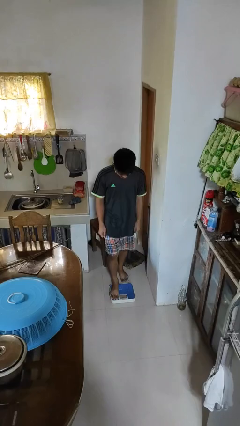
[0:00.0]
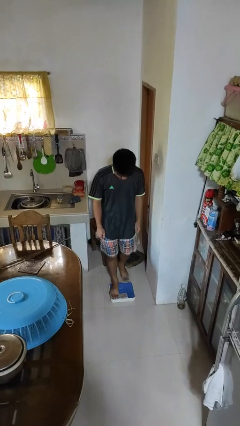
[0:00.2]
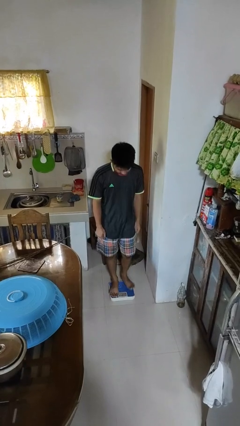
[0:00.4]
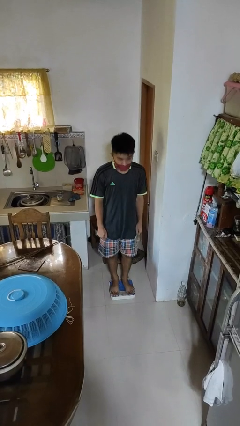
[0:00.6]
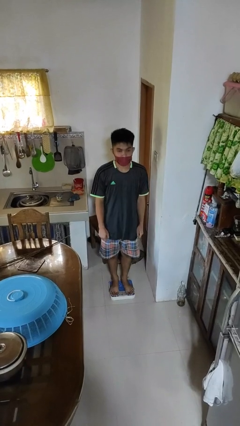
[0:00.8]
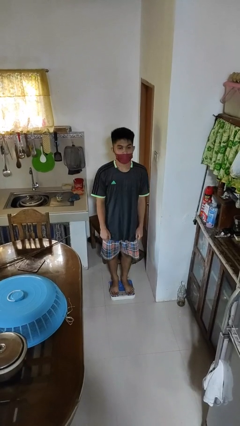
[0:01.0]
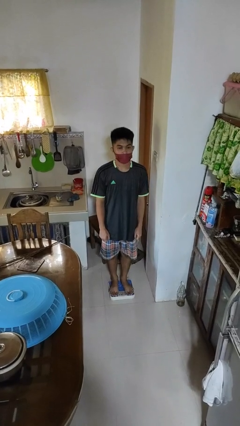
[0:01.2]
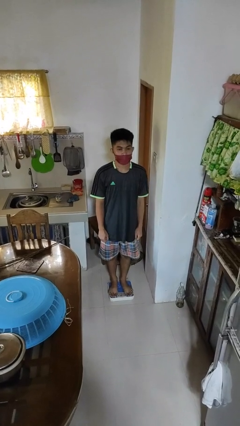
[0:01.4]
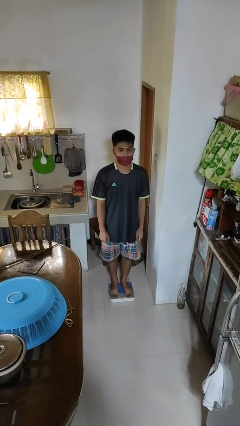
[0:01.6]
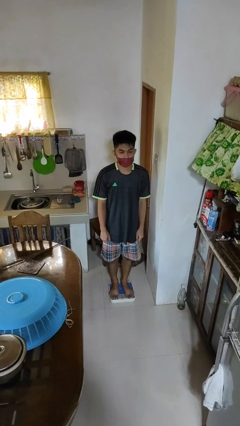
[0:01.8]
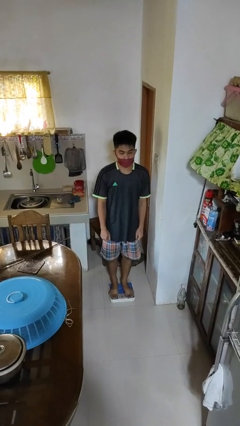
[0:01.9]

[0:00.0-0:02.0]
person uses bodyweight scale

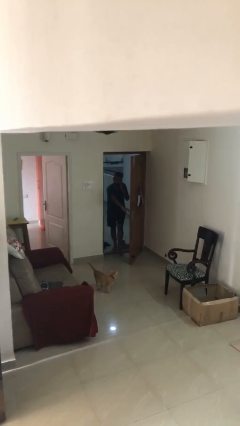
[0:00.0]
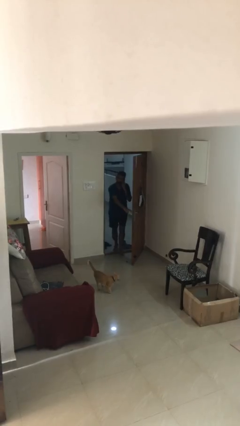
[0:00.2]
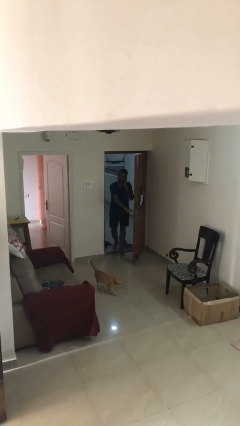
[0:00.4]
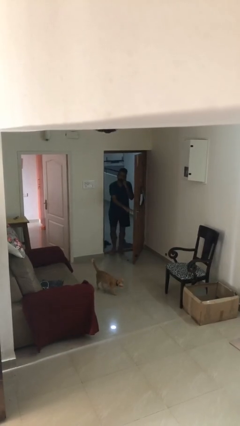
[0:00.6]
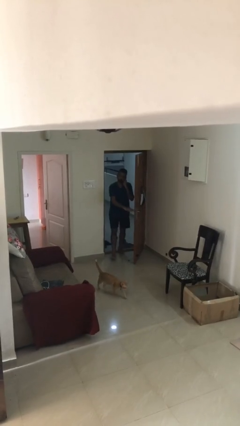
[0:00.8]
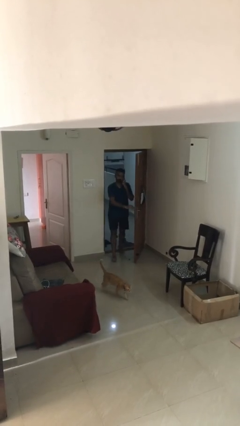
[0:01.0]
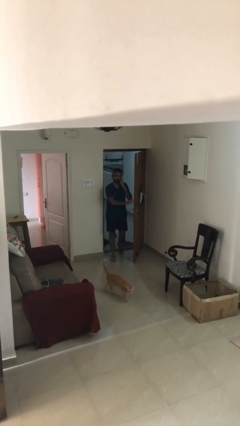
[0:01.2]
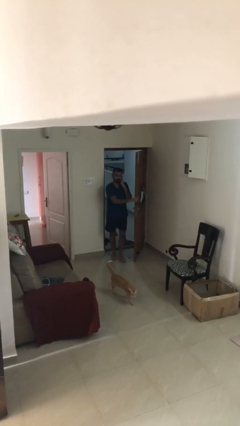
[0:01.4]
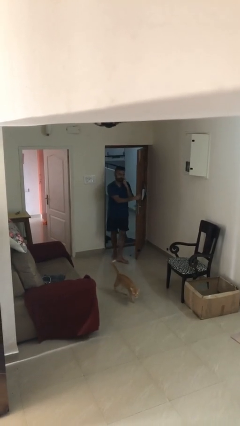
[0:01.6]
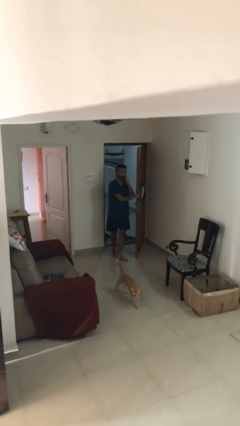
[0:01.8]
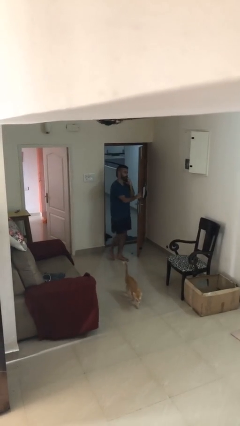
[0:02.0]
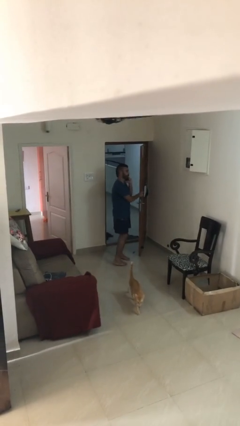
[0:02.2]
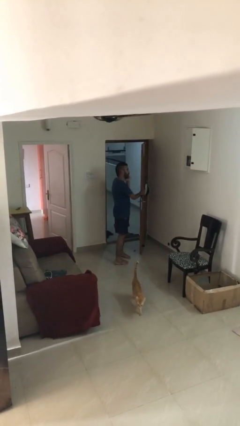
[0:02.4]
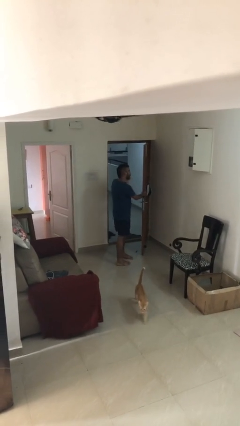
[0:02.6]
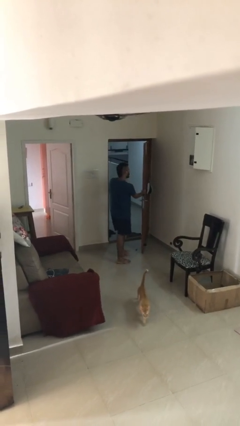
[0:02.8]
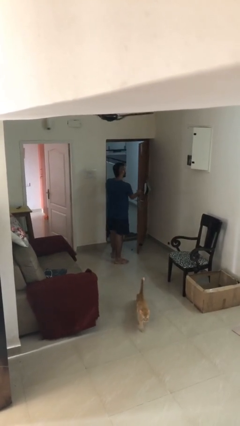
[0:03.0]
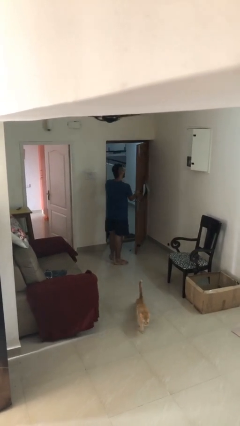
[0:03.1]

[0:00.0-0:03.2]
person enters scene through structure

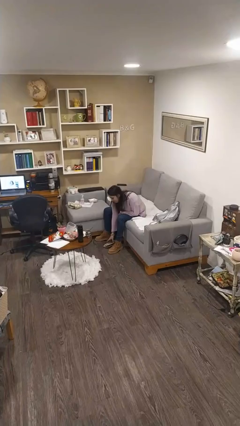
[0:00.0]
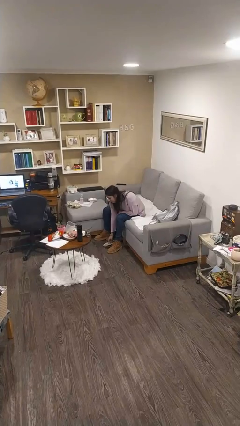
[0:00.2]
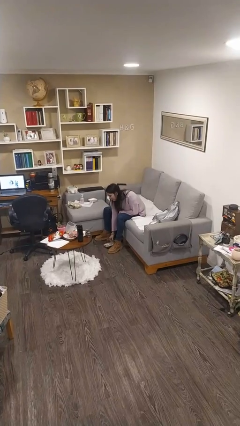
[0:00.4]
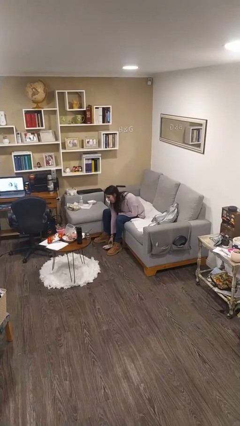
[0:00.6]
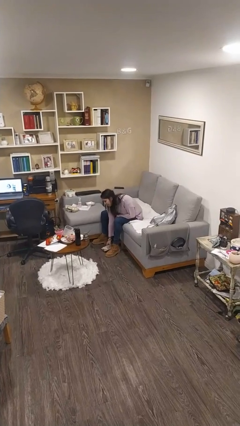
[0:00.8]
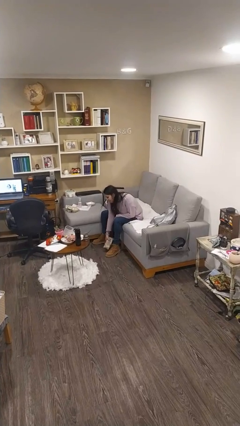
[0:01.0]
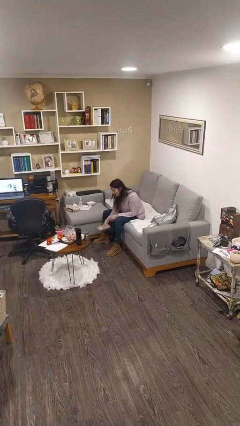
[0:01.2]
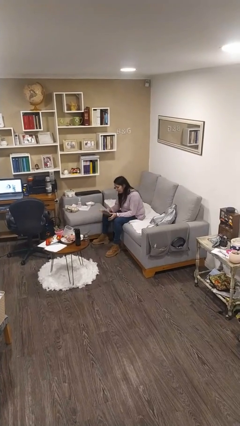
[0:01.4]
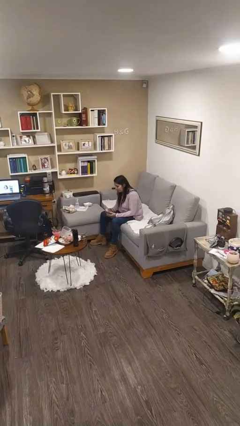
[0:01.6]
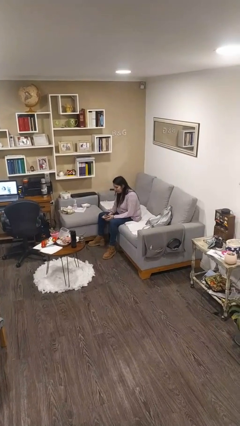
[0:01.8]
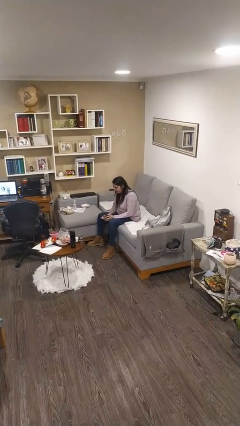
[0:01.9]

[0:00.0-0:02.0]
person picks up object from floor

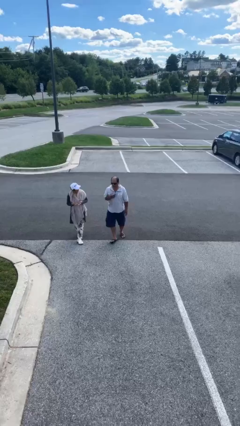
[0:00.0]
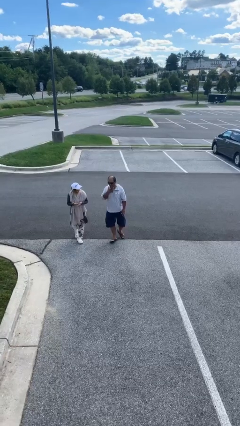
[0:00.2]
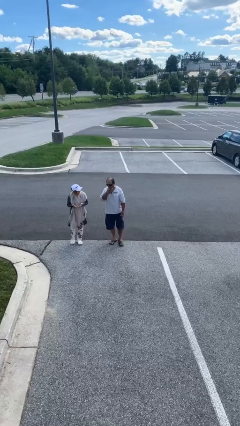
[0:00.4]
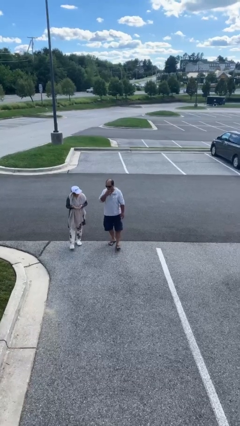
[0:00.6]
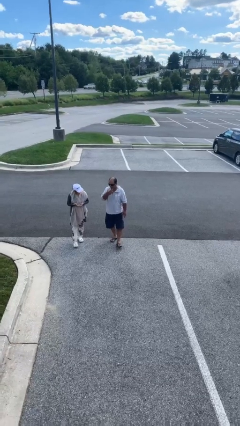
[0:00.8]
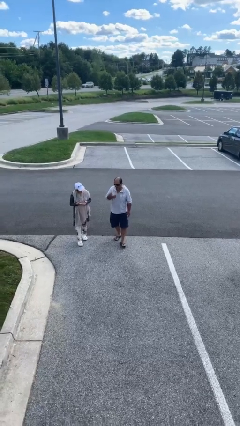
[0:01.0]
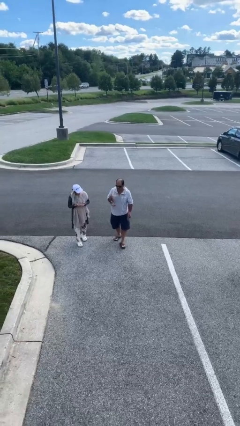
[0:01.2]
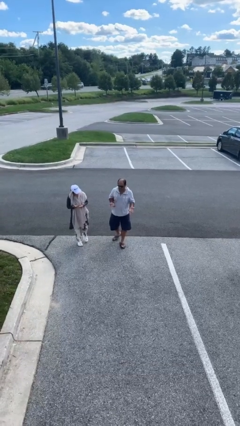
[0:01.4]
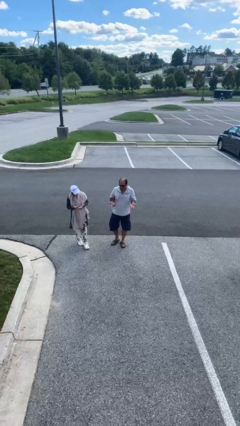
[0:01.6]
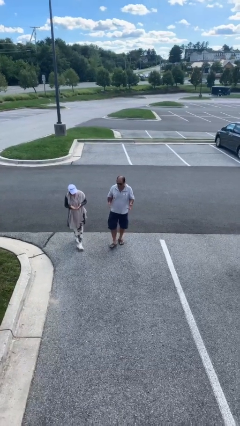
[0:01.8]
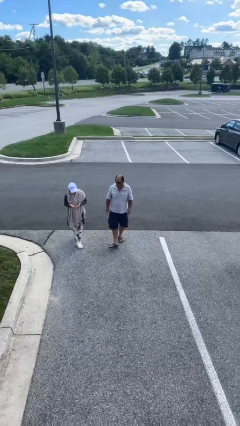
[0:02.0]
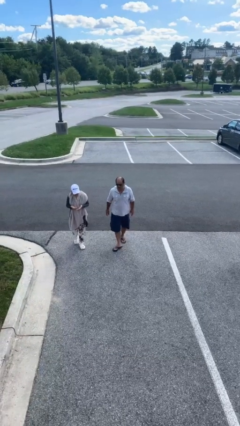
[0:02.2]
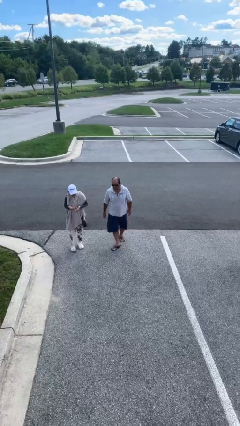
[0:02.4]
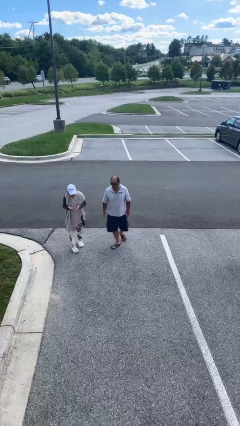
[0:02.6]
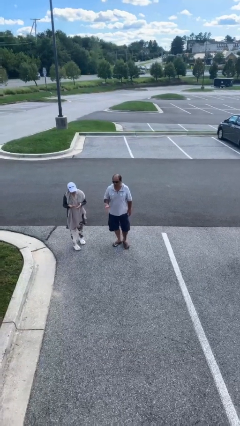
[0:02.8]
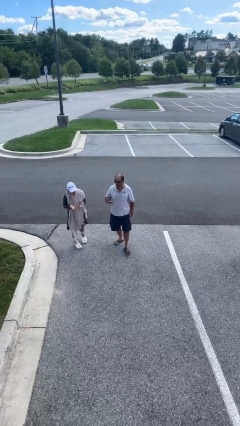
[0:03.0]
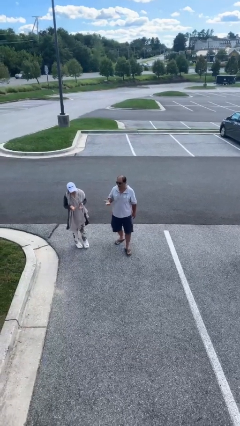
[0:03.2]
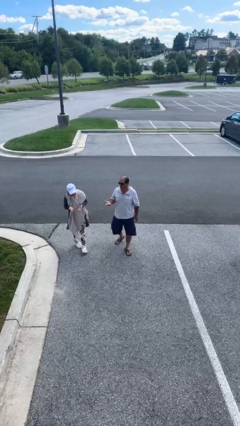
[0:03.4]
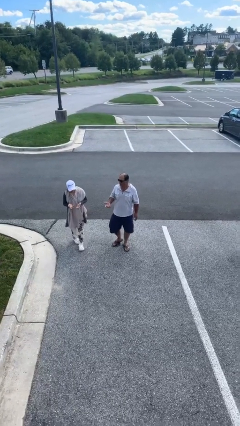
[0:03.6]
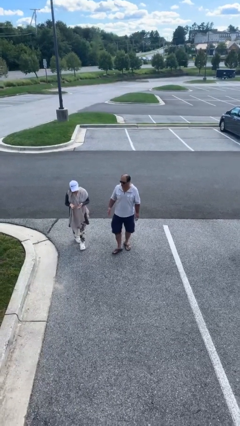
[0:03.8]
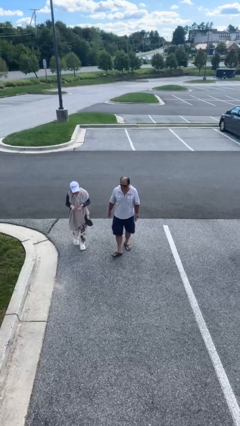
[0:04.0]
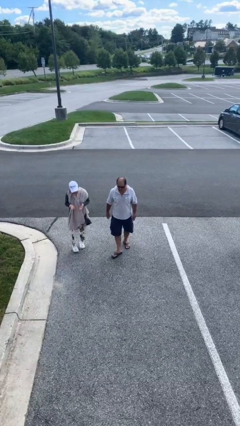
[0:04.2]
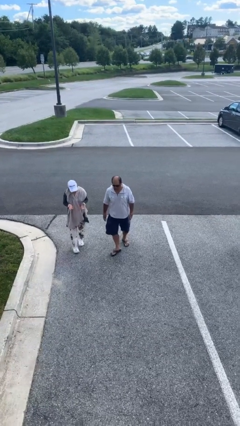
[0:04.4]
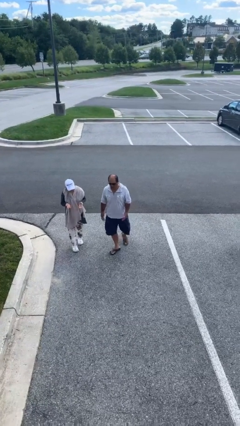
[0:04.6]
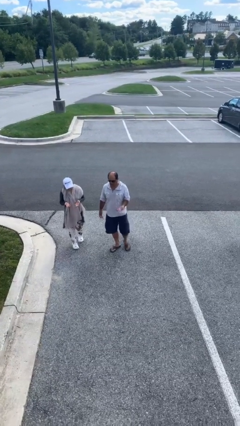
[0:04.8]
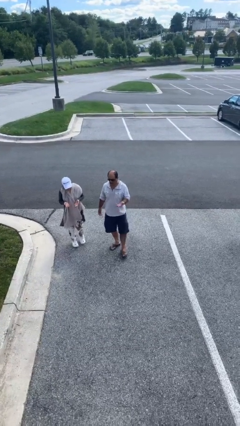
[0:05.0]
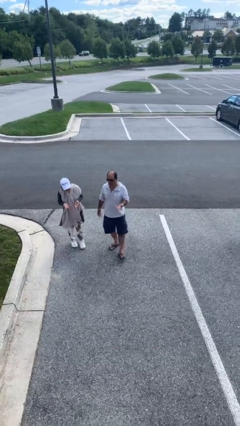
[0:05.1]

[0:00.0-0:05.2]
person talks to person

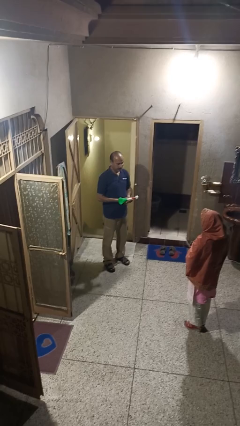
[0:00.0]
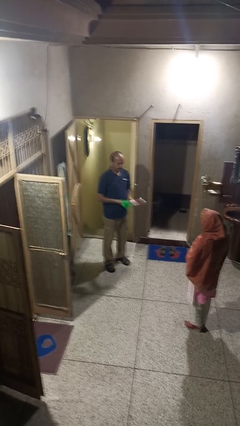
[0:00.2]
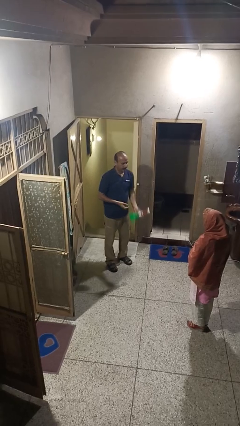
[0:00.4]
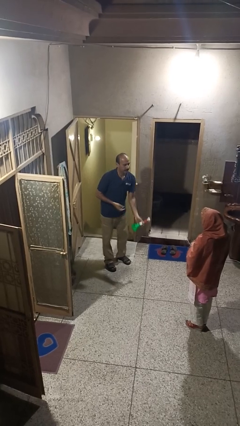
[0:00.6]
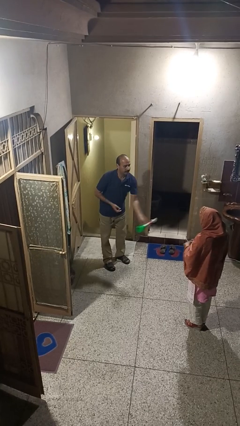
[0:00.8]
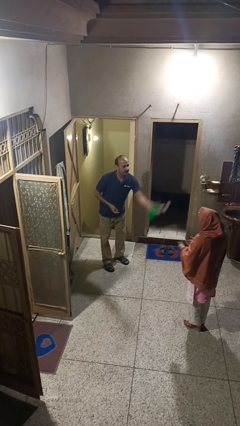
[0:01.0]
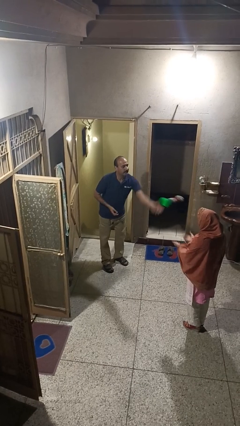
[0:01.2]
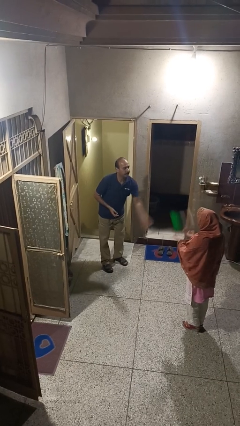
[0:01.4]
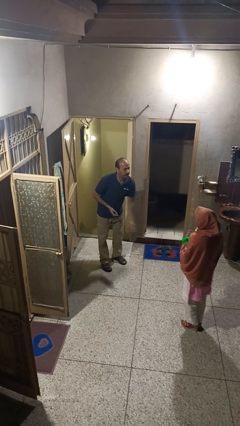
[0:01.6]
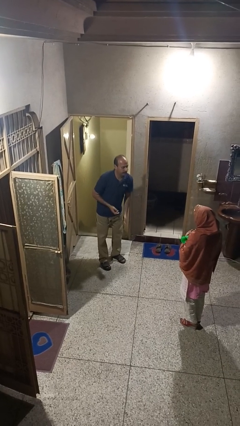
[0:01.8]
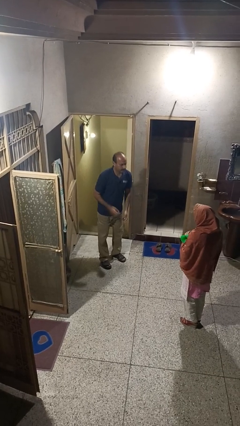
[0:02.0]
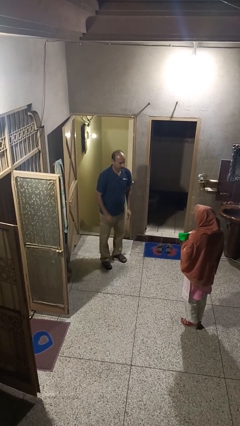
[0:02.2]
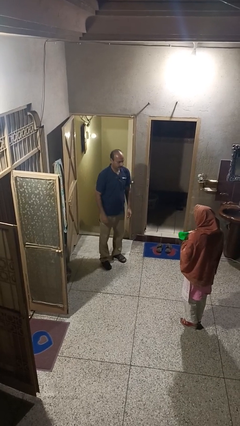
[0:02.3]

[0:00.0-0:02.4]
person throws object to person

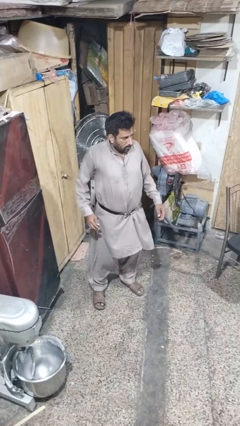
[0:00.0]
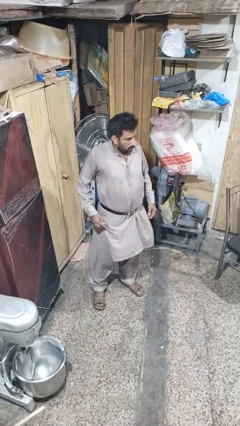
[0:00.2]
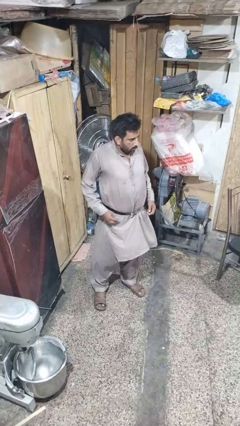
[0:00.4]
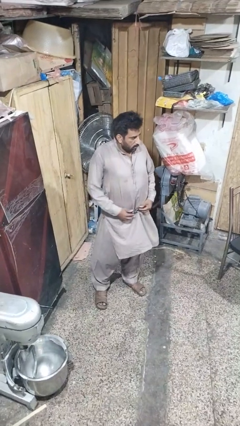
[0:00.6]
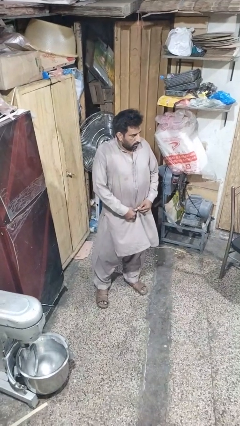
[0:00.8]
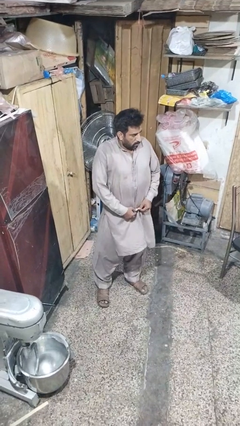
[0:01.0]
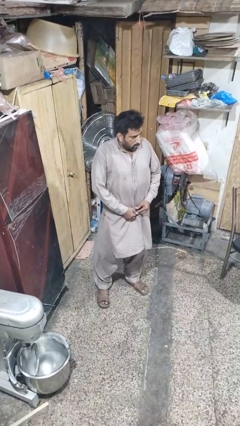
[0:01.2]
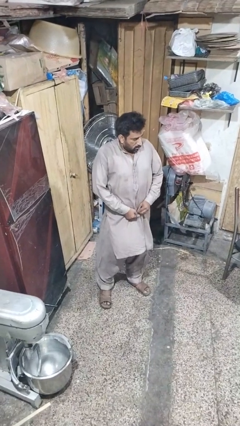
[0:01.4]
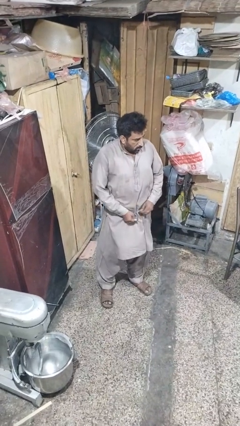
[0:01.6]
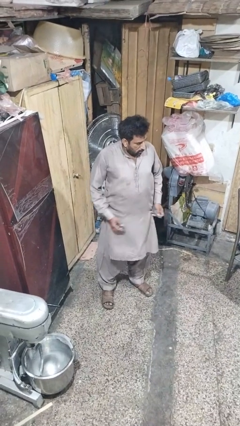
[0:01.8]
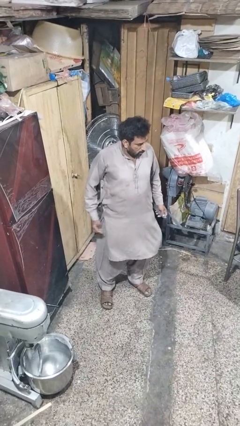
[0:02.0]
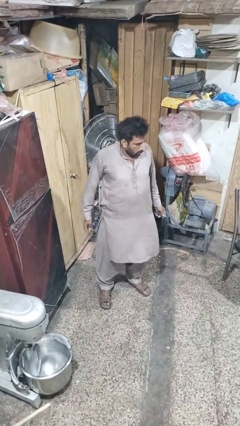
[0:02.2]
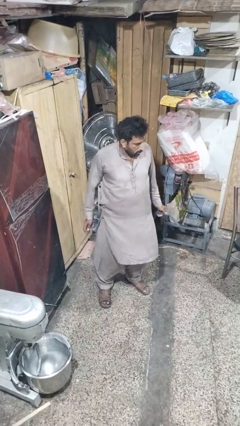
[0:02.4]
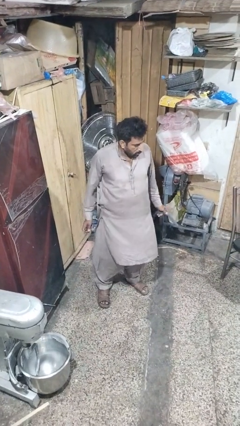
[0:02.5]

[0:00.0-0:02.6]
person takes off belt

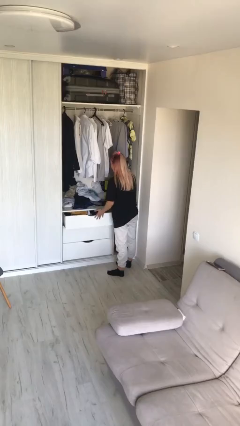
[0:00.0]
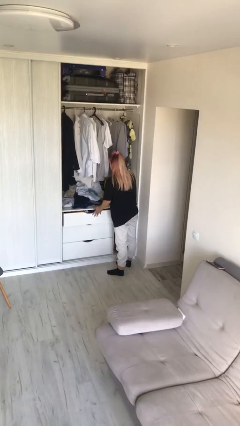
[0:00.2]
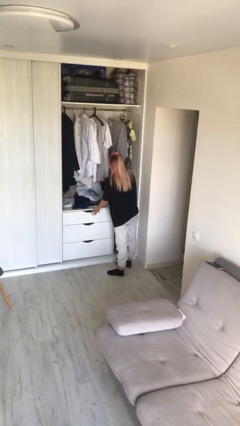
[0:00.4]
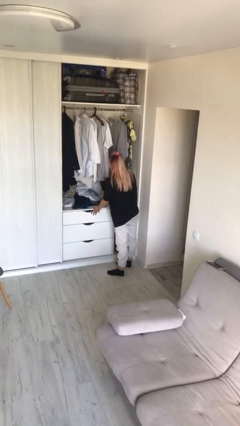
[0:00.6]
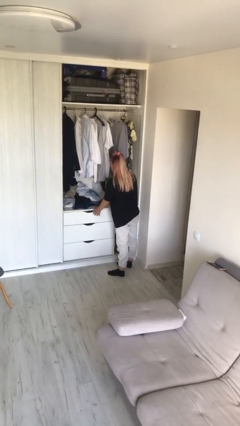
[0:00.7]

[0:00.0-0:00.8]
person closes dresser drawer
